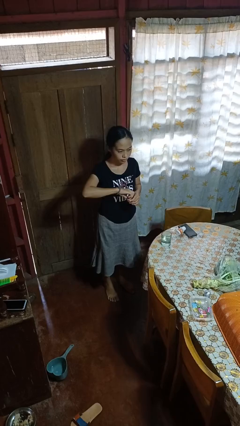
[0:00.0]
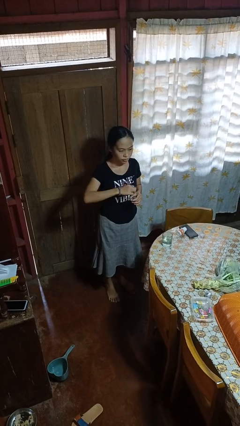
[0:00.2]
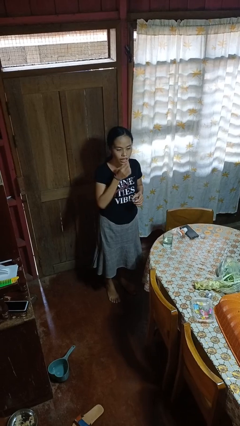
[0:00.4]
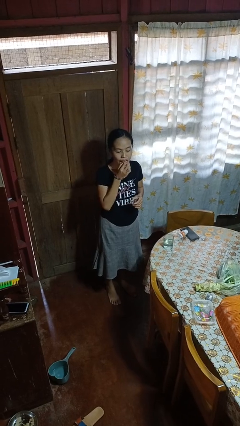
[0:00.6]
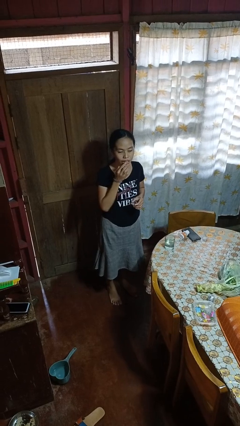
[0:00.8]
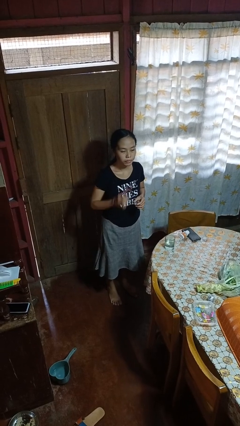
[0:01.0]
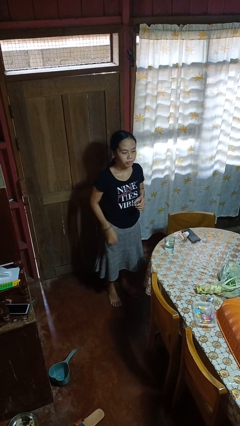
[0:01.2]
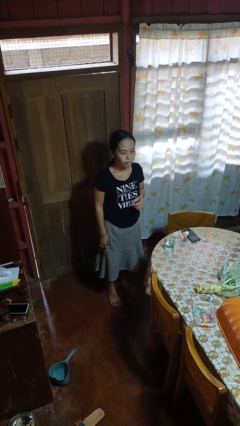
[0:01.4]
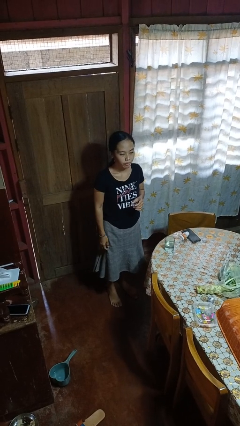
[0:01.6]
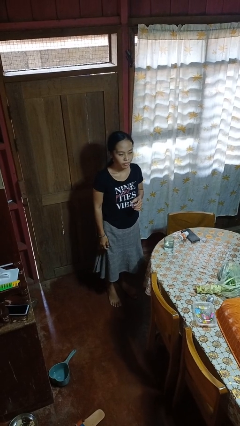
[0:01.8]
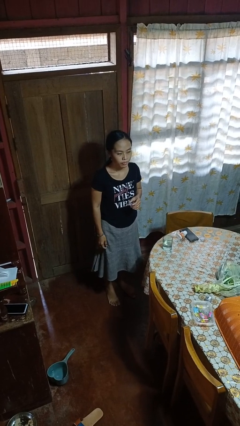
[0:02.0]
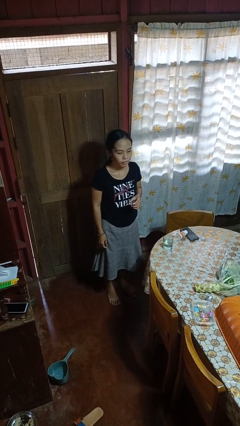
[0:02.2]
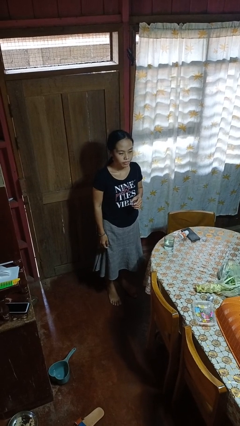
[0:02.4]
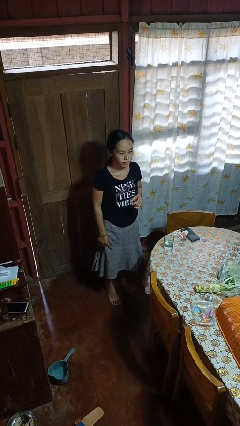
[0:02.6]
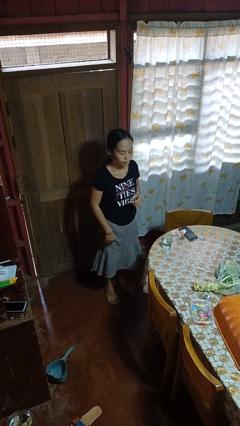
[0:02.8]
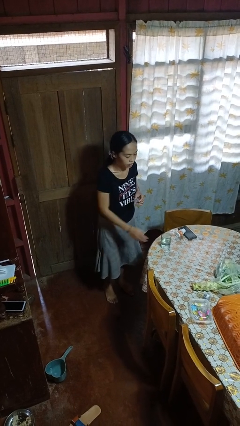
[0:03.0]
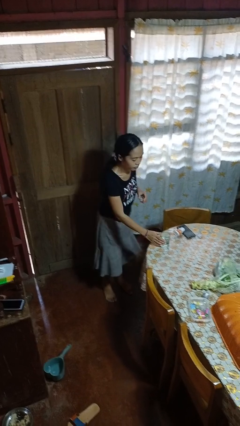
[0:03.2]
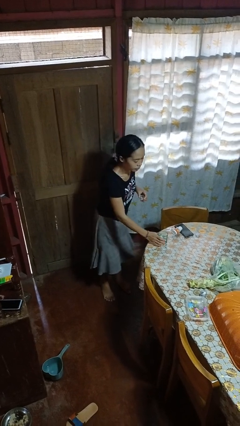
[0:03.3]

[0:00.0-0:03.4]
person takes medicine pills

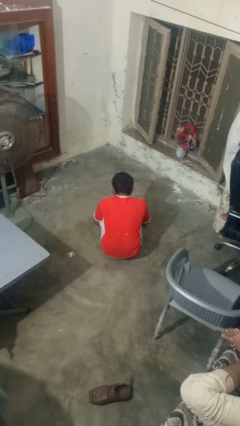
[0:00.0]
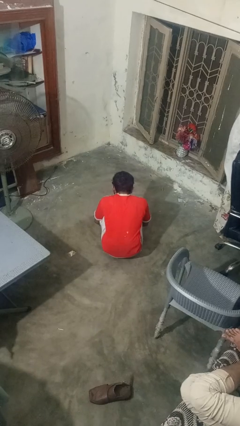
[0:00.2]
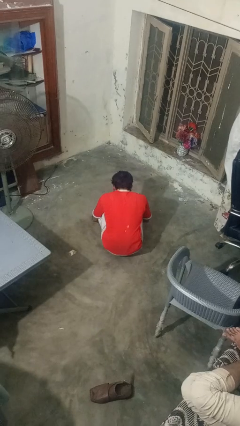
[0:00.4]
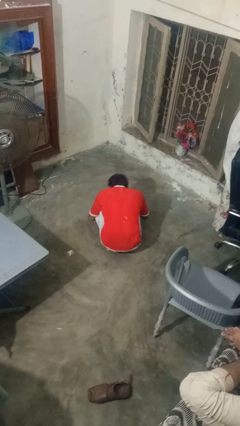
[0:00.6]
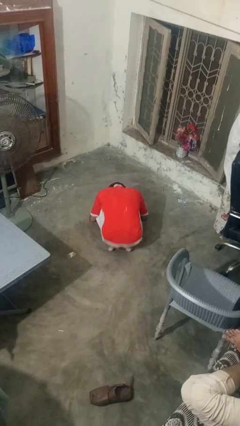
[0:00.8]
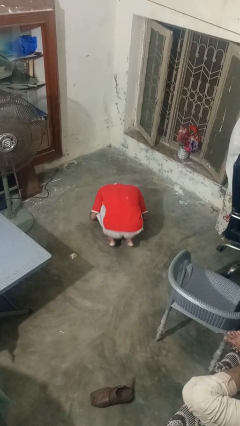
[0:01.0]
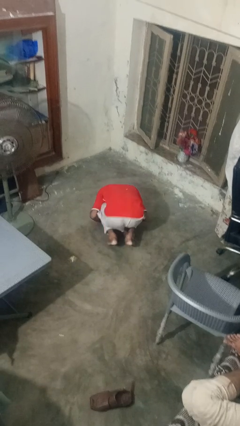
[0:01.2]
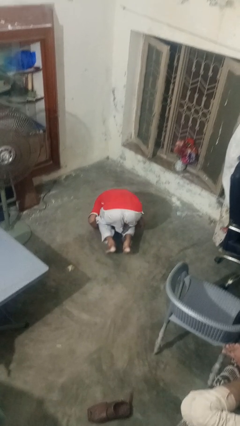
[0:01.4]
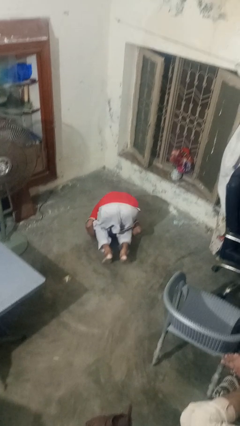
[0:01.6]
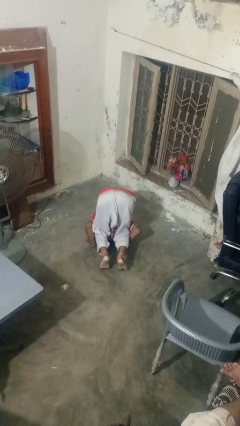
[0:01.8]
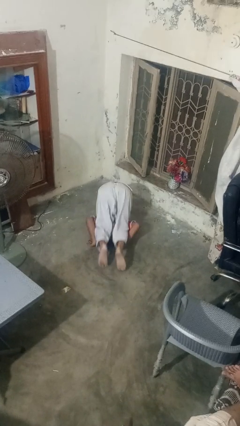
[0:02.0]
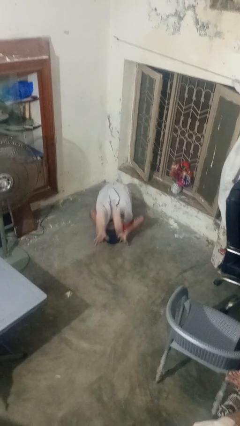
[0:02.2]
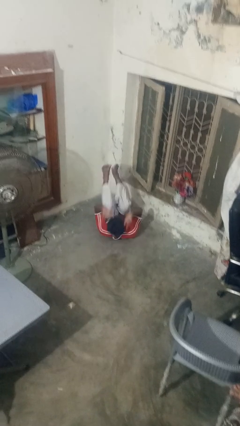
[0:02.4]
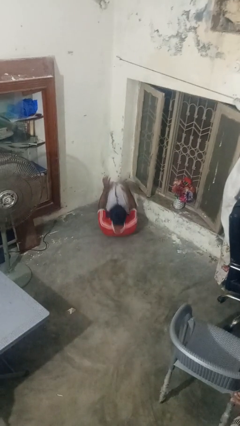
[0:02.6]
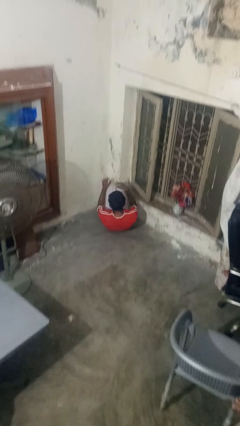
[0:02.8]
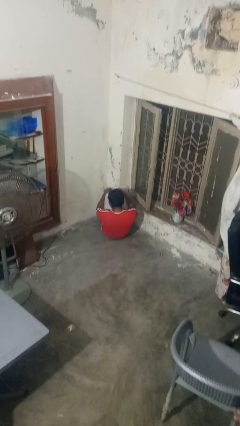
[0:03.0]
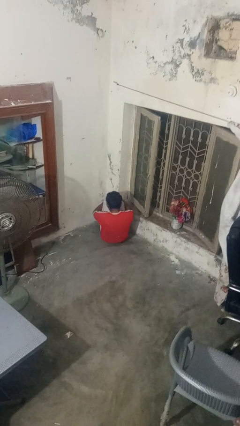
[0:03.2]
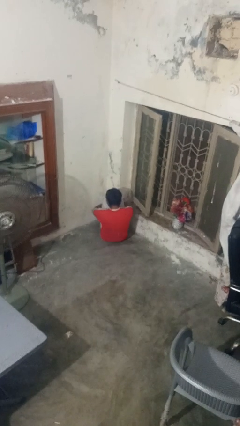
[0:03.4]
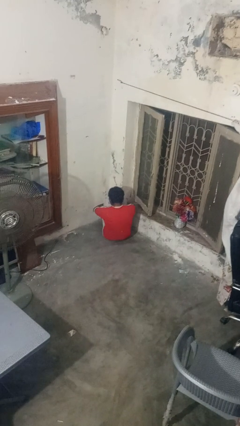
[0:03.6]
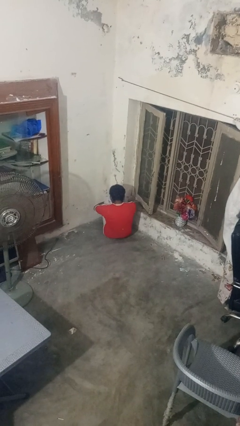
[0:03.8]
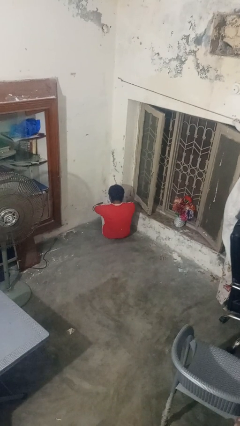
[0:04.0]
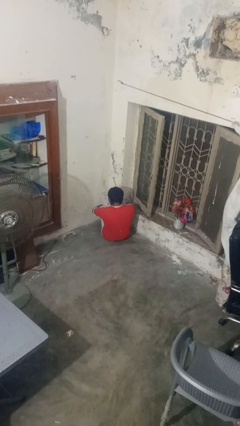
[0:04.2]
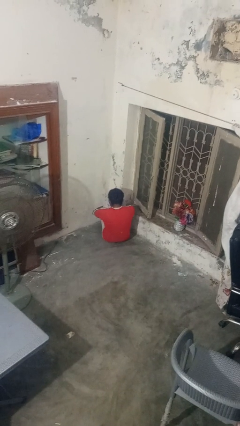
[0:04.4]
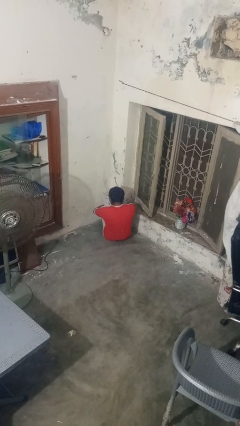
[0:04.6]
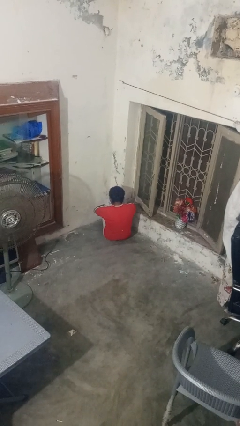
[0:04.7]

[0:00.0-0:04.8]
person somersaults

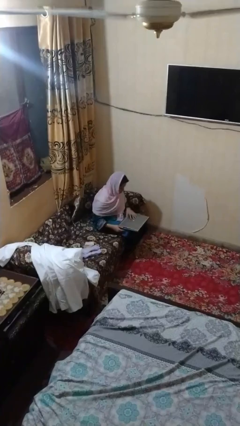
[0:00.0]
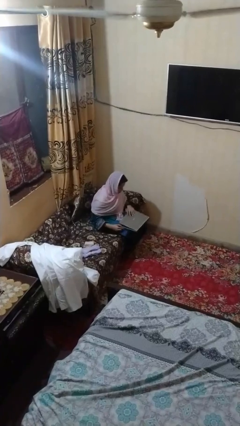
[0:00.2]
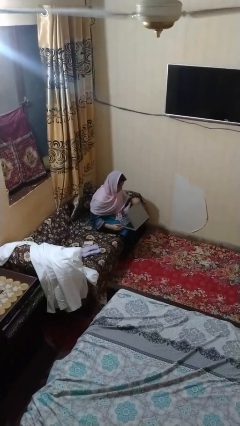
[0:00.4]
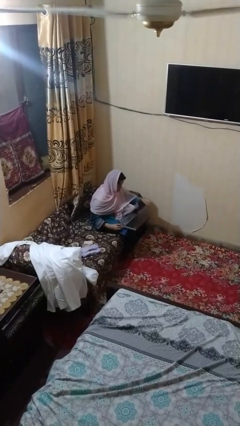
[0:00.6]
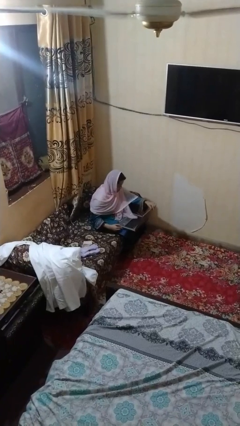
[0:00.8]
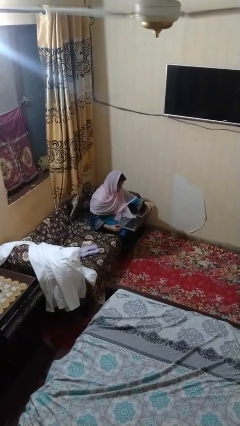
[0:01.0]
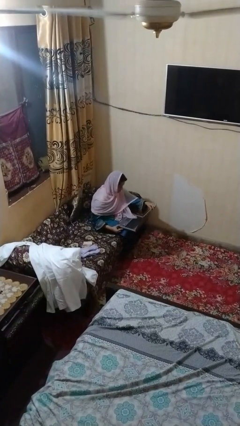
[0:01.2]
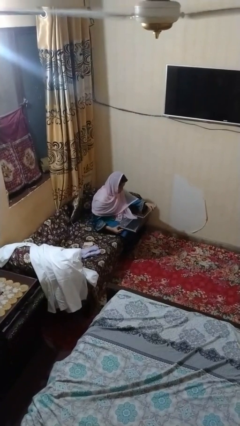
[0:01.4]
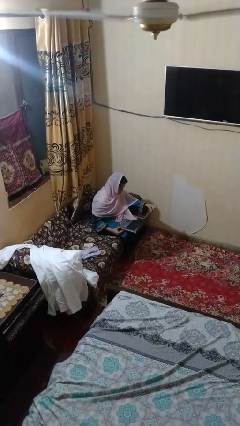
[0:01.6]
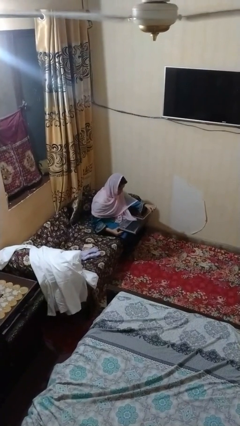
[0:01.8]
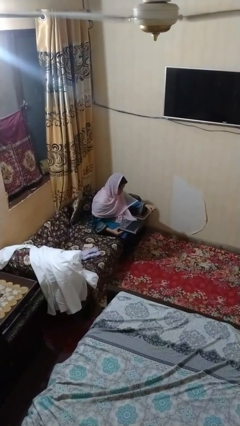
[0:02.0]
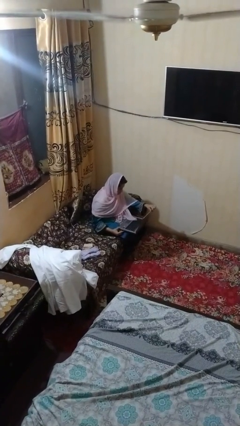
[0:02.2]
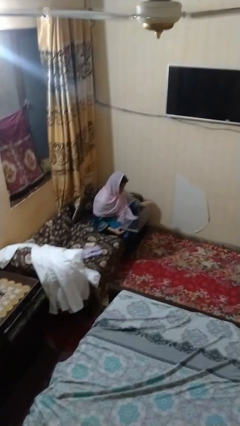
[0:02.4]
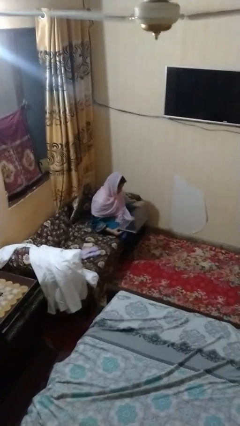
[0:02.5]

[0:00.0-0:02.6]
person opens laptop

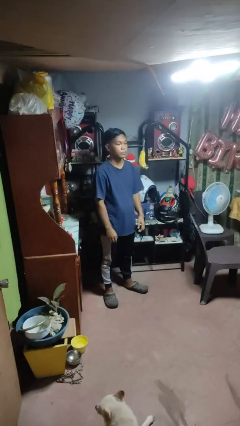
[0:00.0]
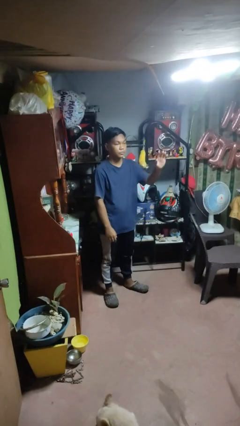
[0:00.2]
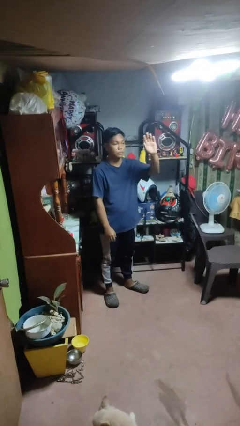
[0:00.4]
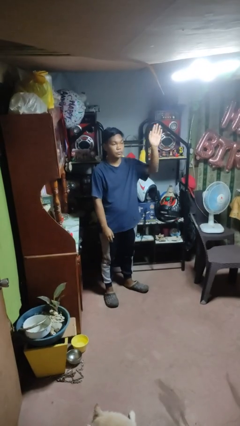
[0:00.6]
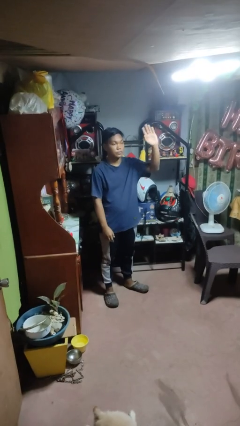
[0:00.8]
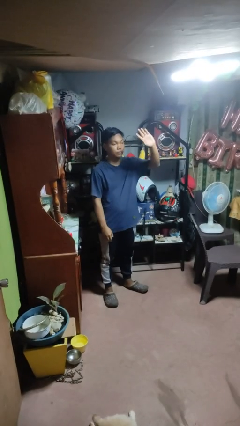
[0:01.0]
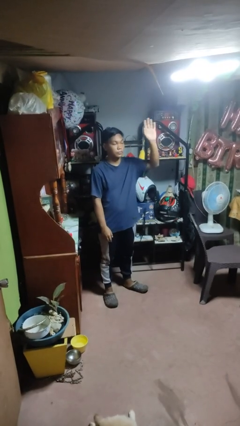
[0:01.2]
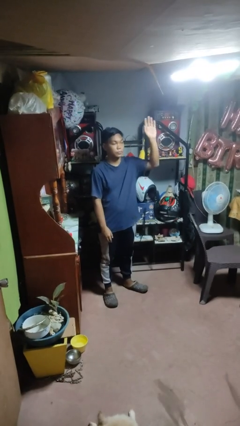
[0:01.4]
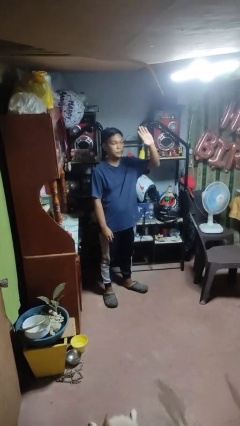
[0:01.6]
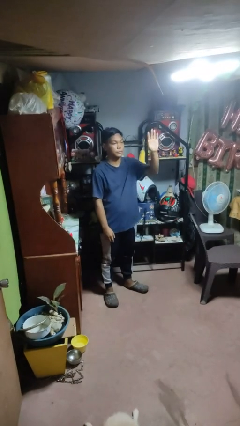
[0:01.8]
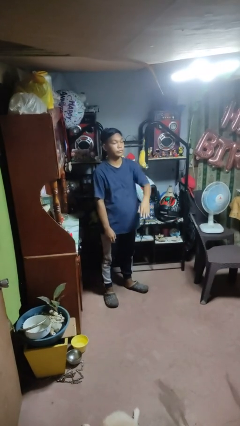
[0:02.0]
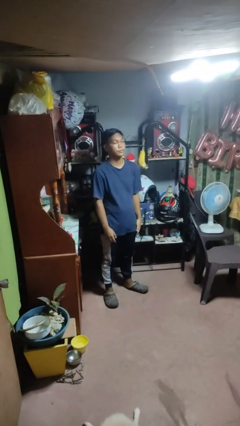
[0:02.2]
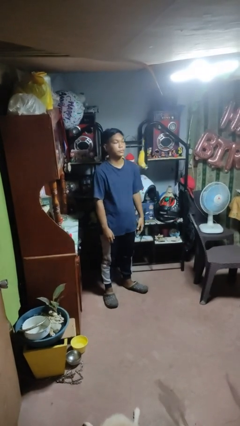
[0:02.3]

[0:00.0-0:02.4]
person waves at person

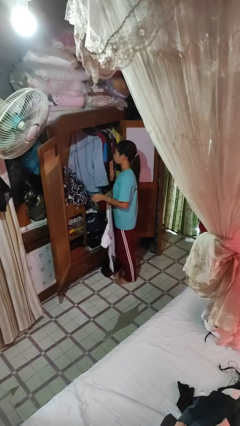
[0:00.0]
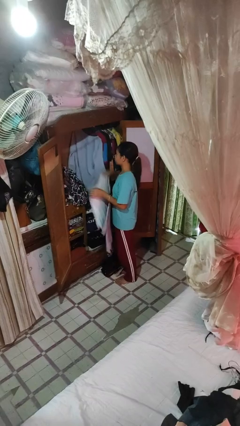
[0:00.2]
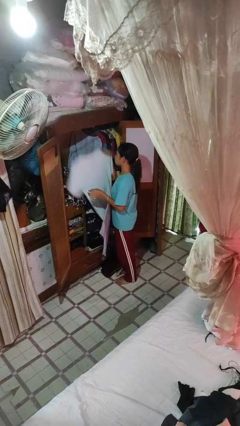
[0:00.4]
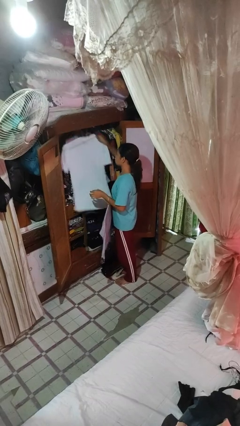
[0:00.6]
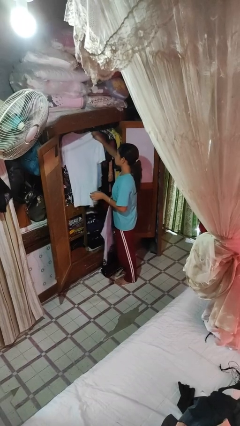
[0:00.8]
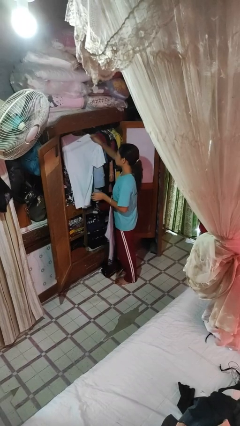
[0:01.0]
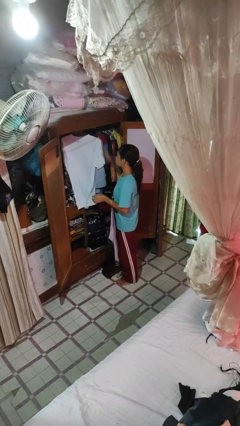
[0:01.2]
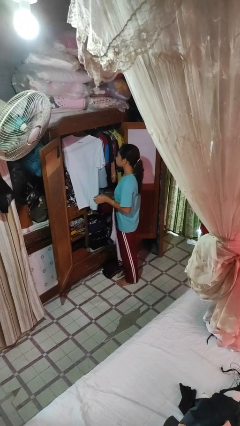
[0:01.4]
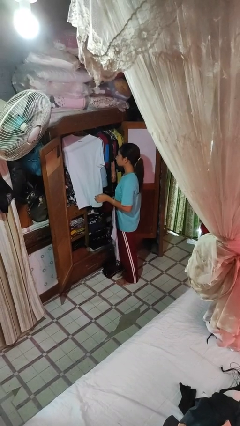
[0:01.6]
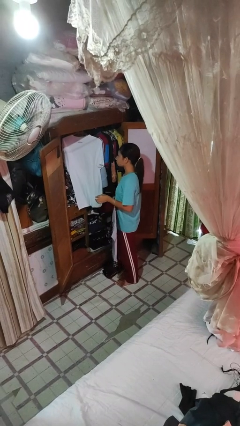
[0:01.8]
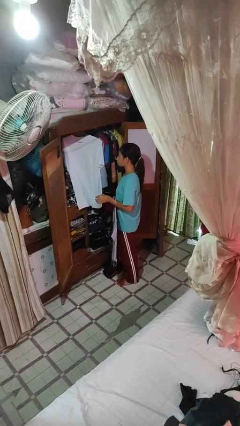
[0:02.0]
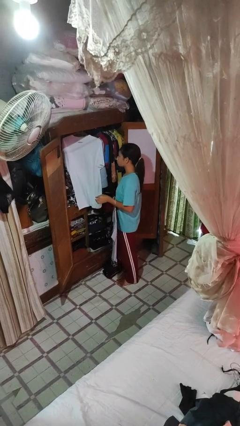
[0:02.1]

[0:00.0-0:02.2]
person puts clothes into closet

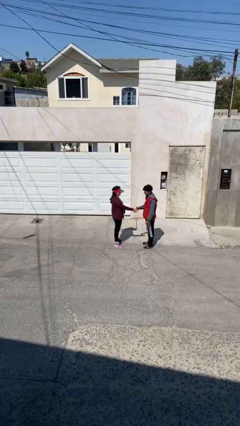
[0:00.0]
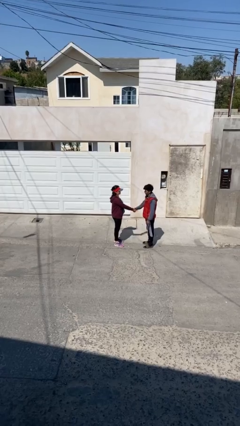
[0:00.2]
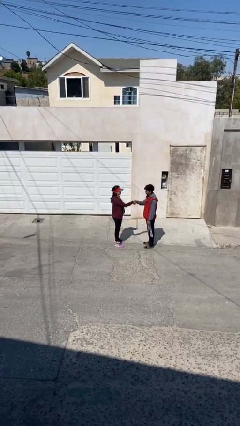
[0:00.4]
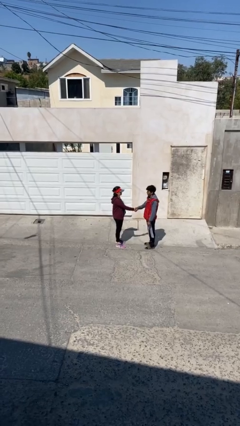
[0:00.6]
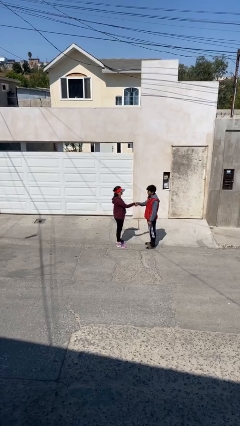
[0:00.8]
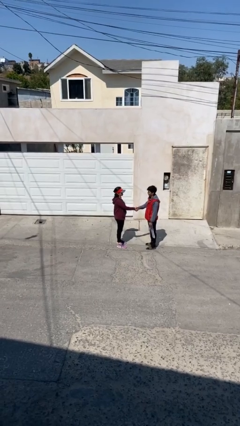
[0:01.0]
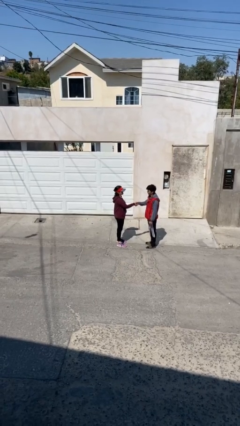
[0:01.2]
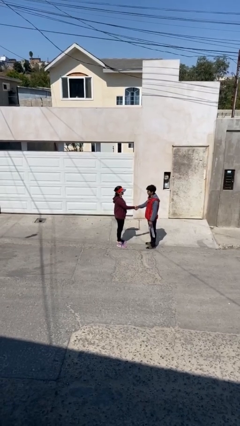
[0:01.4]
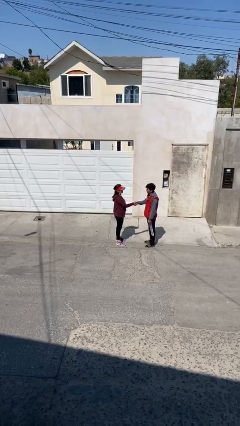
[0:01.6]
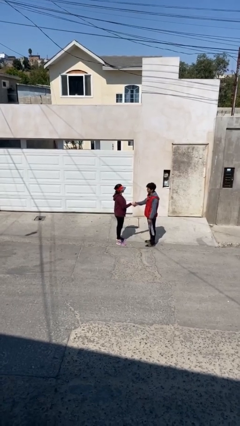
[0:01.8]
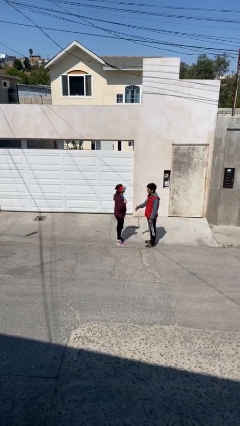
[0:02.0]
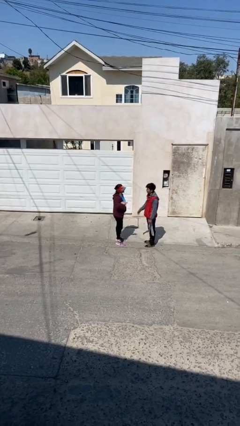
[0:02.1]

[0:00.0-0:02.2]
person shakes hand
